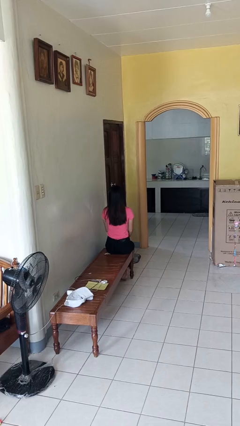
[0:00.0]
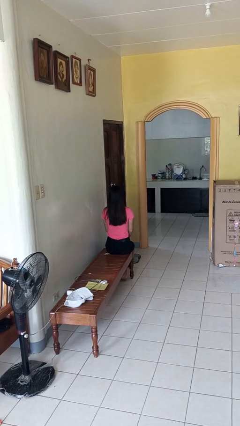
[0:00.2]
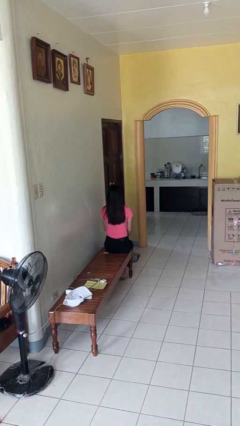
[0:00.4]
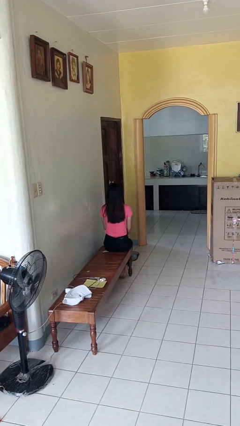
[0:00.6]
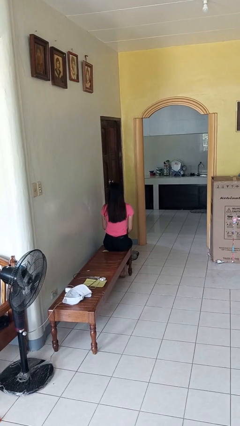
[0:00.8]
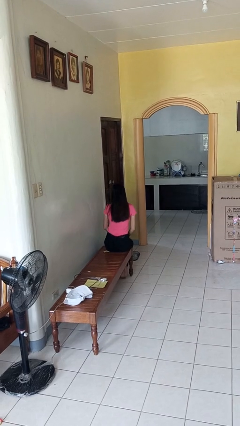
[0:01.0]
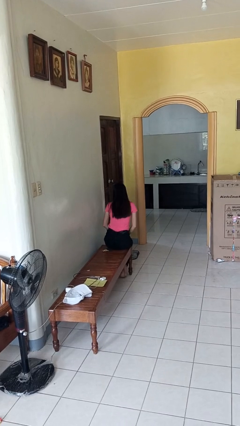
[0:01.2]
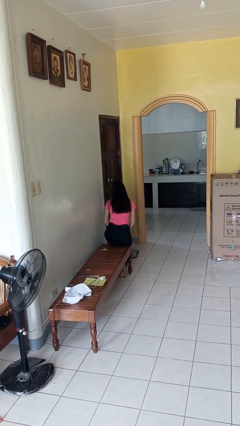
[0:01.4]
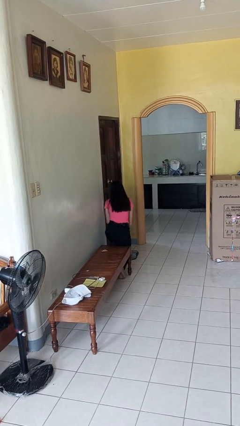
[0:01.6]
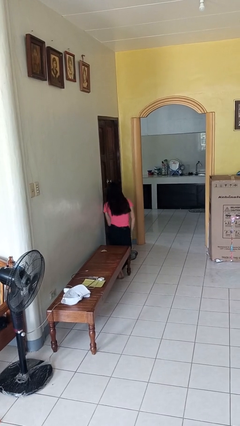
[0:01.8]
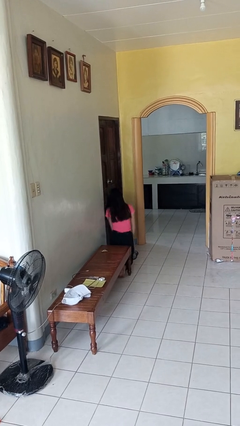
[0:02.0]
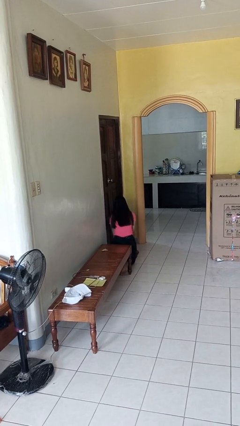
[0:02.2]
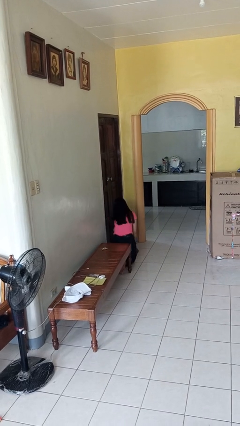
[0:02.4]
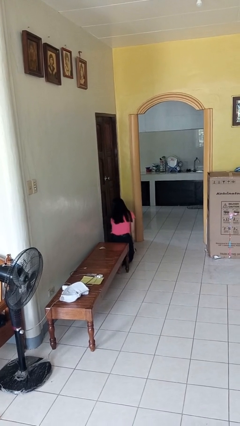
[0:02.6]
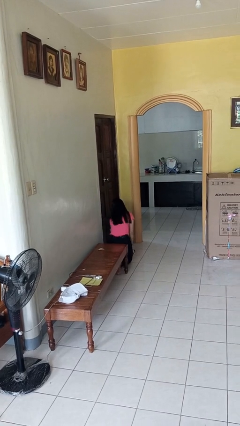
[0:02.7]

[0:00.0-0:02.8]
person falls from chair

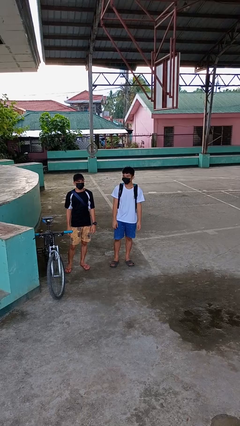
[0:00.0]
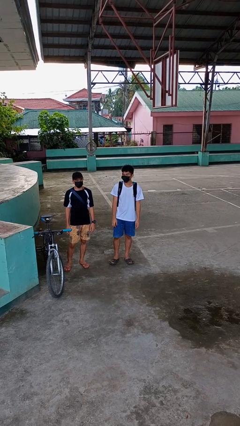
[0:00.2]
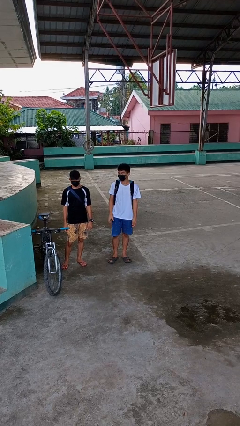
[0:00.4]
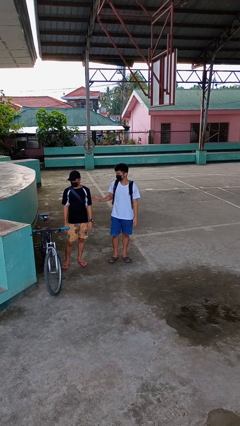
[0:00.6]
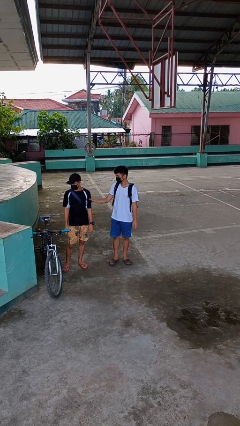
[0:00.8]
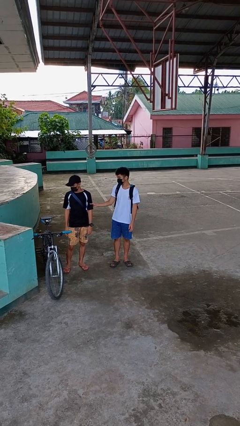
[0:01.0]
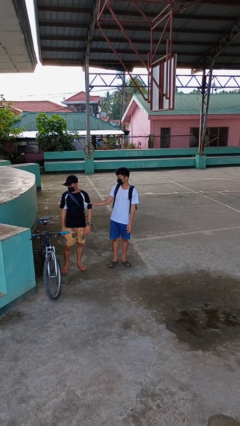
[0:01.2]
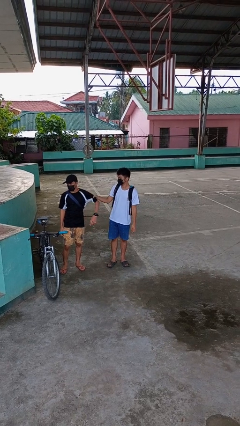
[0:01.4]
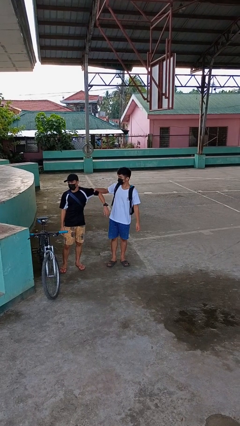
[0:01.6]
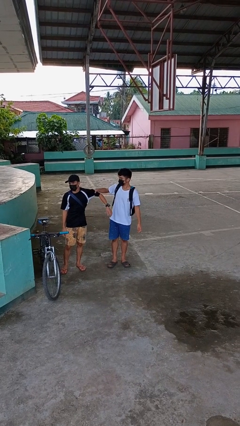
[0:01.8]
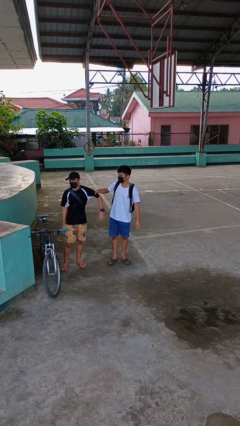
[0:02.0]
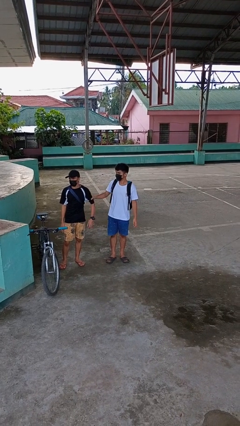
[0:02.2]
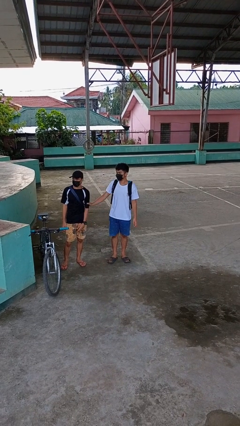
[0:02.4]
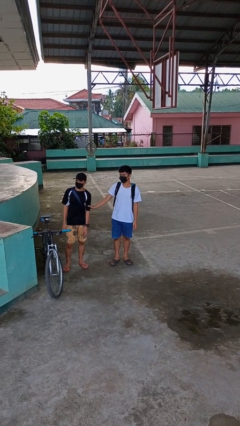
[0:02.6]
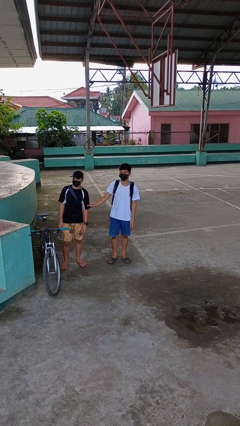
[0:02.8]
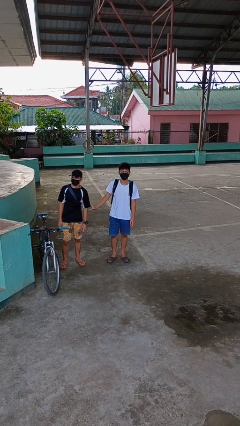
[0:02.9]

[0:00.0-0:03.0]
person grabs person by bicep

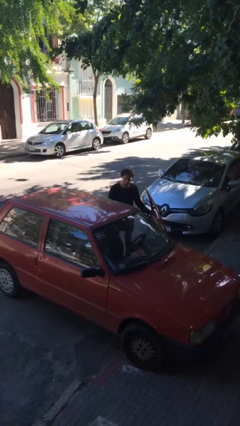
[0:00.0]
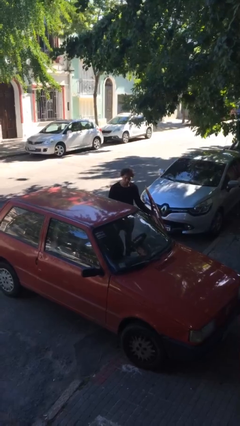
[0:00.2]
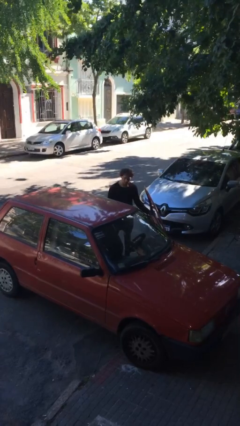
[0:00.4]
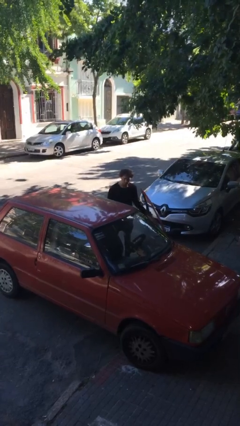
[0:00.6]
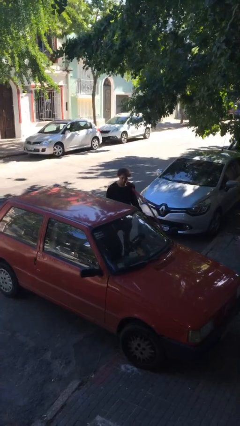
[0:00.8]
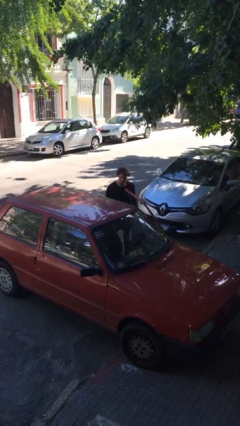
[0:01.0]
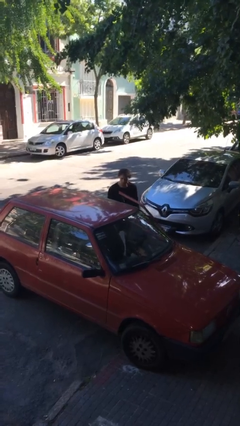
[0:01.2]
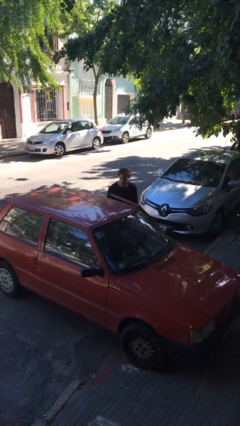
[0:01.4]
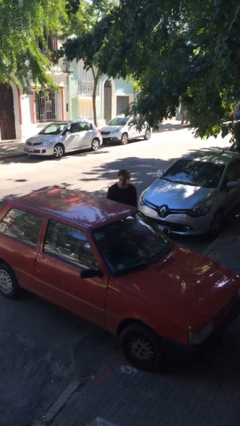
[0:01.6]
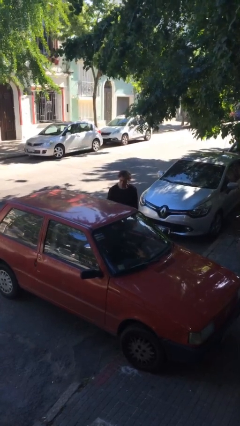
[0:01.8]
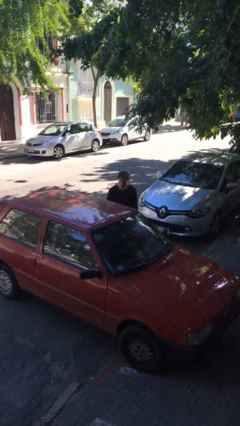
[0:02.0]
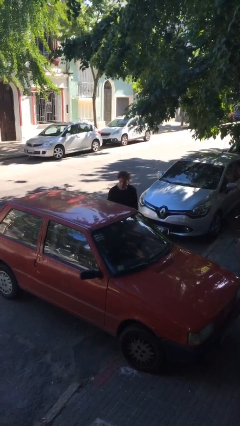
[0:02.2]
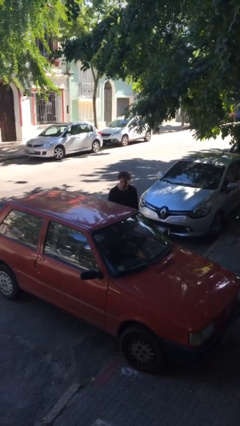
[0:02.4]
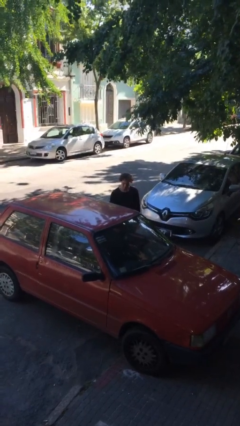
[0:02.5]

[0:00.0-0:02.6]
person closes car door

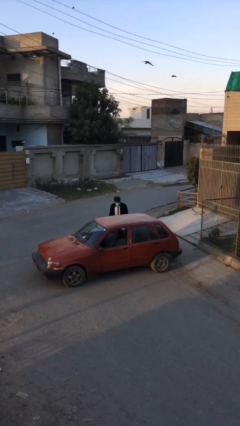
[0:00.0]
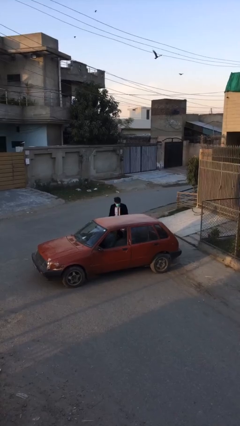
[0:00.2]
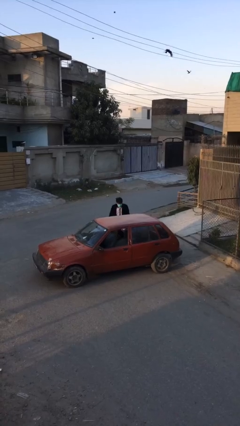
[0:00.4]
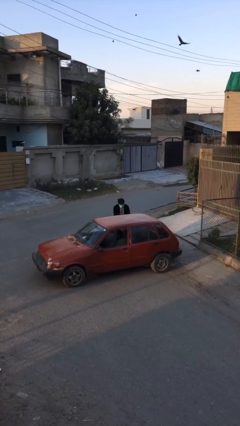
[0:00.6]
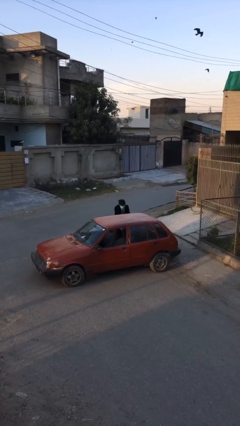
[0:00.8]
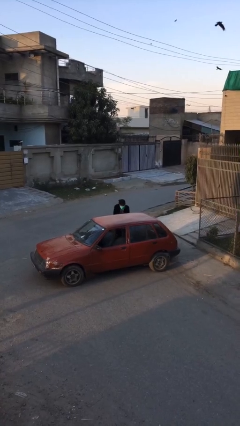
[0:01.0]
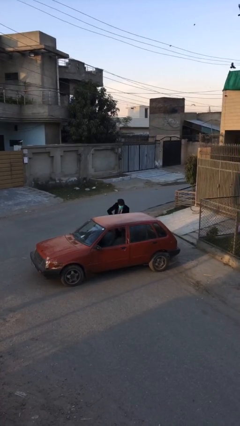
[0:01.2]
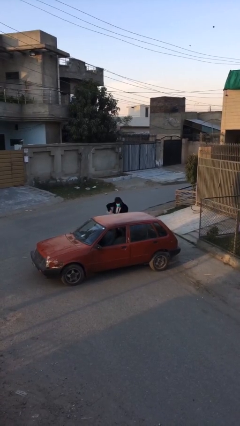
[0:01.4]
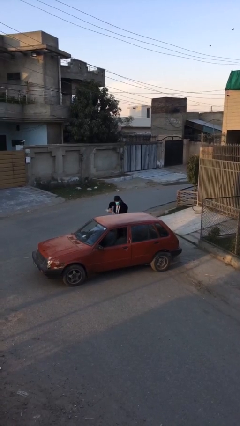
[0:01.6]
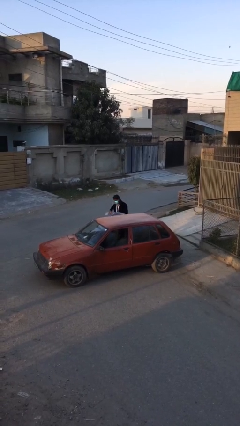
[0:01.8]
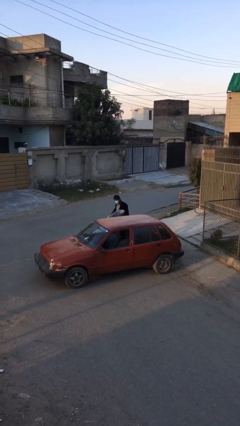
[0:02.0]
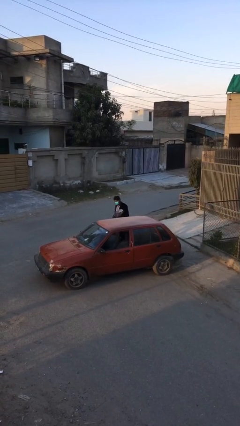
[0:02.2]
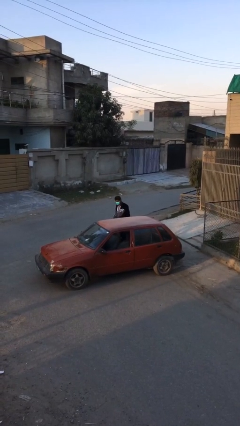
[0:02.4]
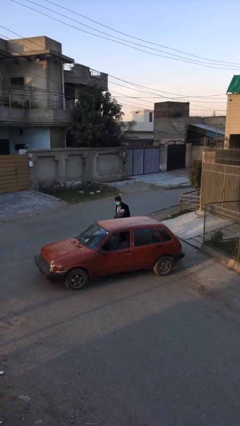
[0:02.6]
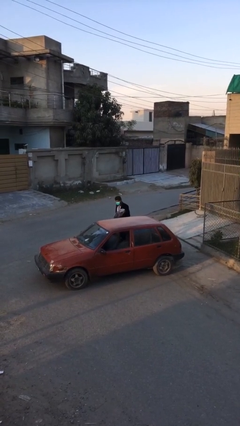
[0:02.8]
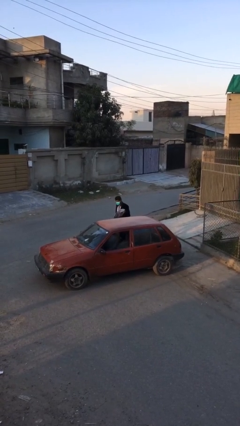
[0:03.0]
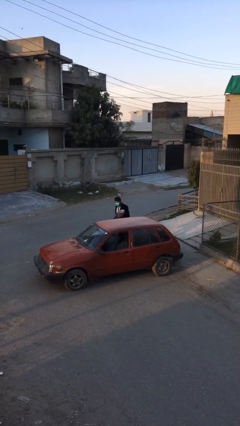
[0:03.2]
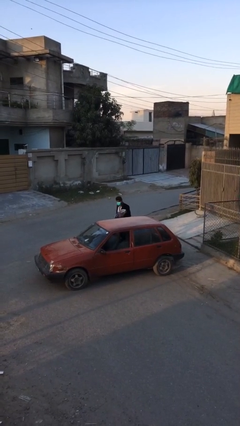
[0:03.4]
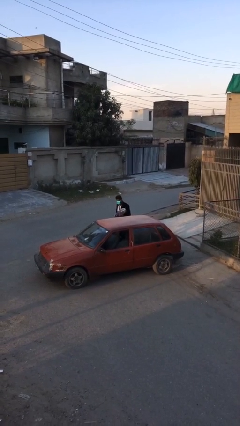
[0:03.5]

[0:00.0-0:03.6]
person unloads car

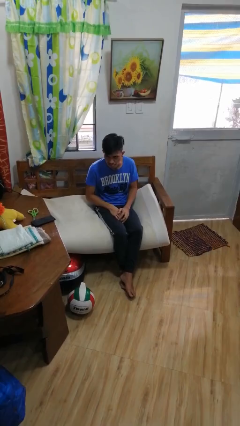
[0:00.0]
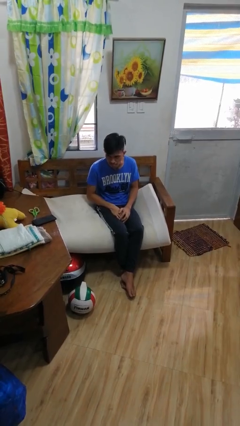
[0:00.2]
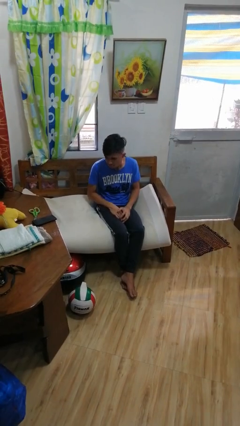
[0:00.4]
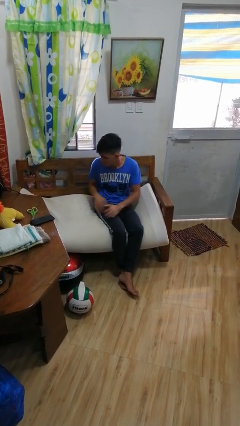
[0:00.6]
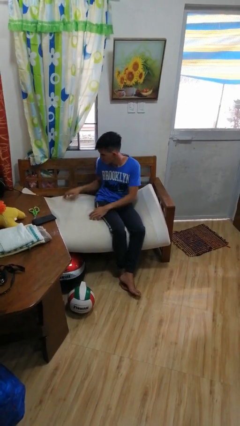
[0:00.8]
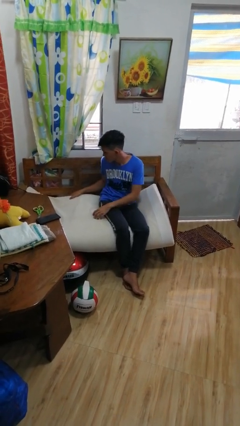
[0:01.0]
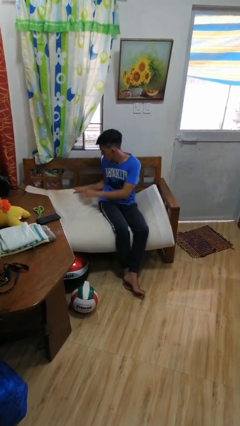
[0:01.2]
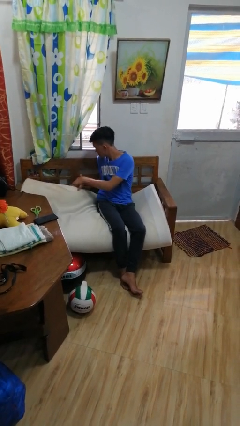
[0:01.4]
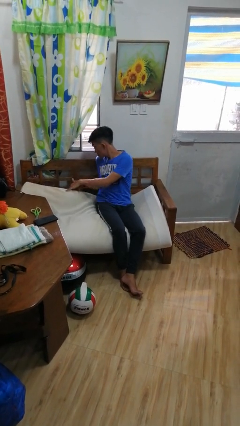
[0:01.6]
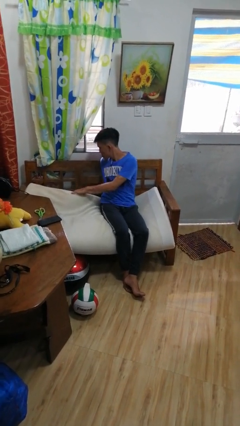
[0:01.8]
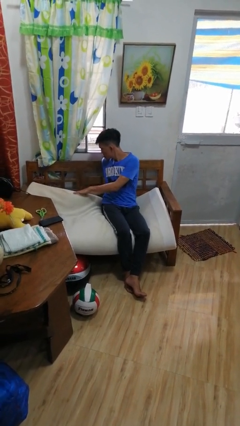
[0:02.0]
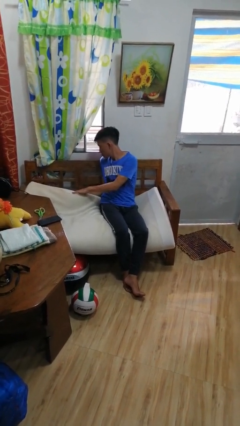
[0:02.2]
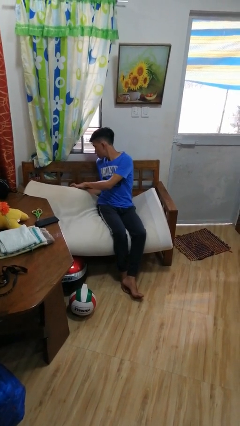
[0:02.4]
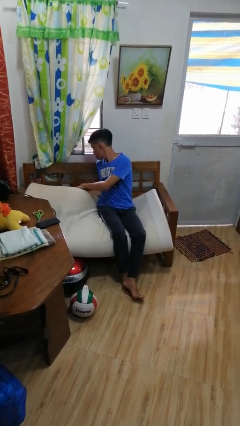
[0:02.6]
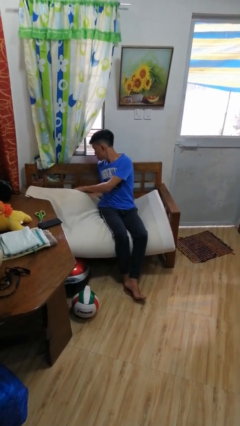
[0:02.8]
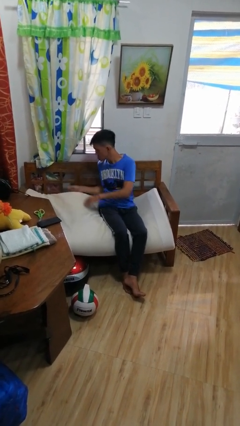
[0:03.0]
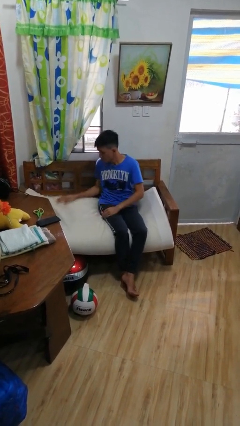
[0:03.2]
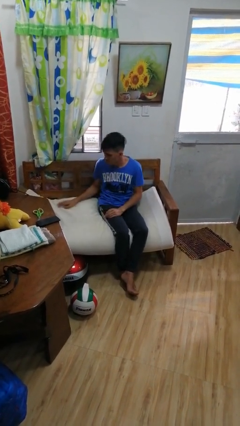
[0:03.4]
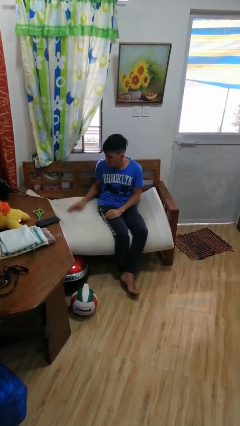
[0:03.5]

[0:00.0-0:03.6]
person searches in couch

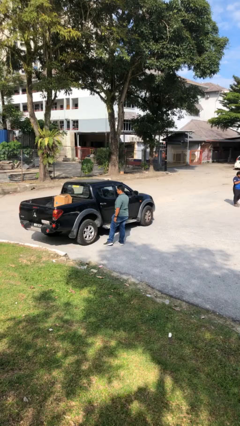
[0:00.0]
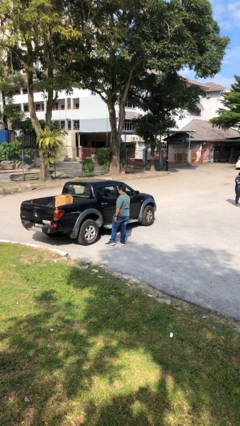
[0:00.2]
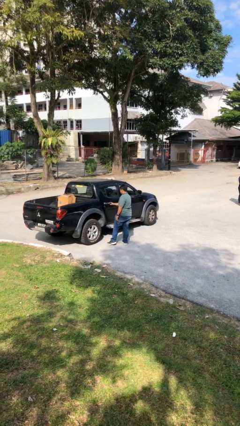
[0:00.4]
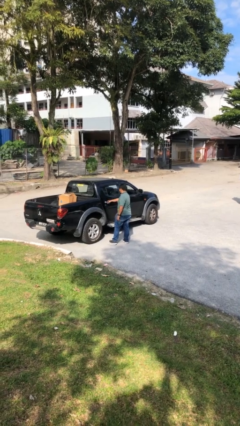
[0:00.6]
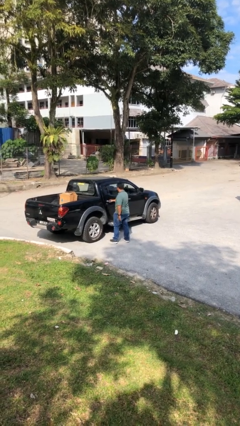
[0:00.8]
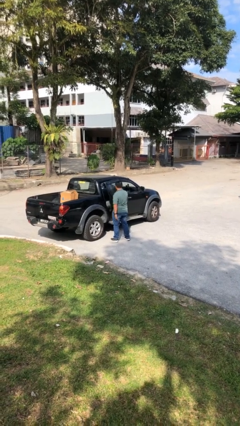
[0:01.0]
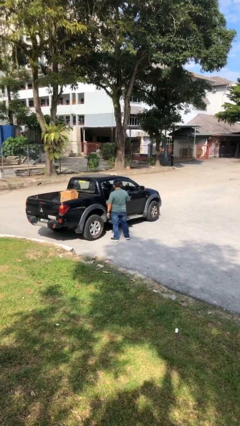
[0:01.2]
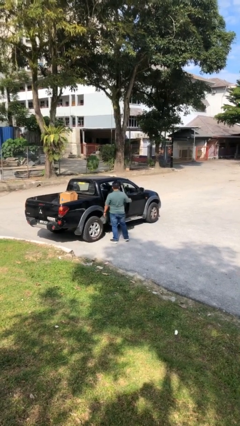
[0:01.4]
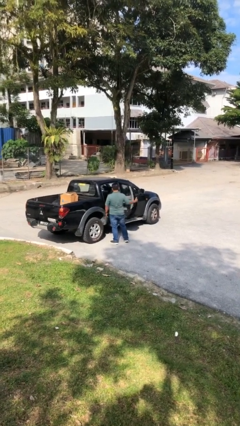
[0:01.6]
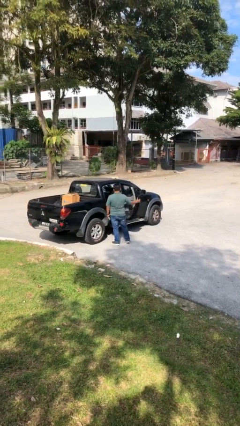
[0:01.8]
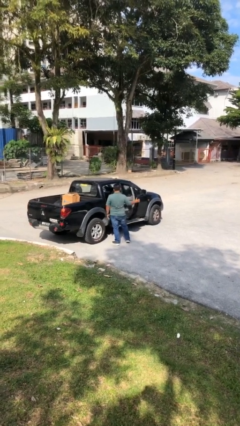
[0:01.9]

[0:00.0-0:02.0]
person opens car door
